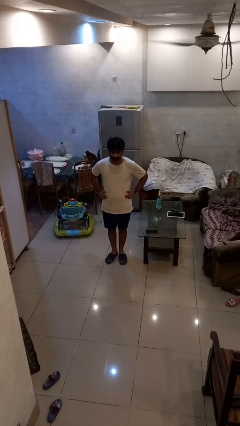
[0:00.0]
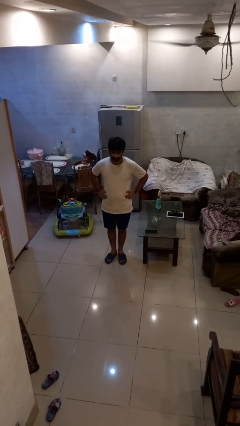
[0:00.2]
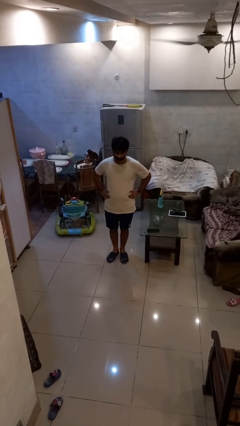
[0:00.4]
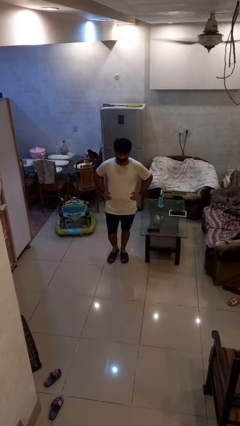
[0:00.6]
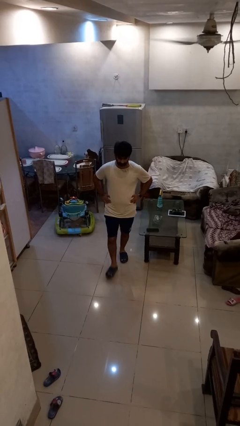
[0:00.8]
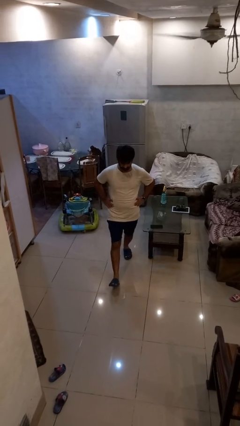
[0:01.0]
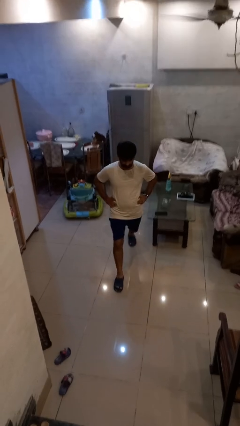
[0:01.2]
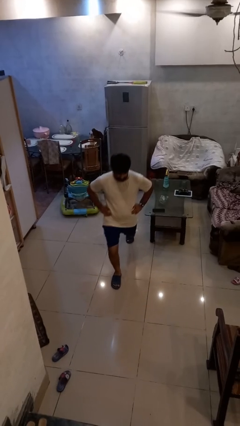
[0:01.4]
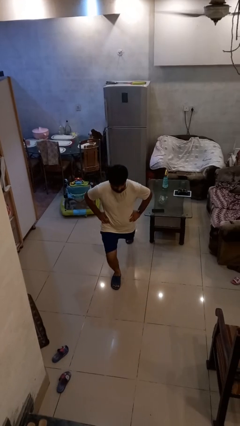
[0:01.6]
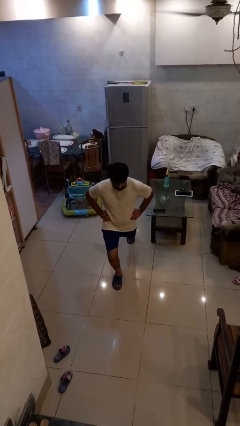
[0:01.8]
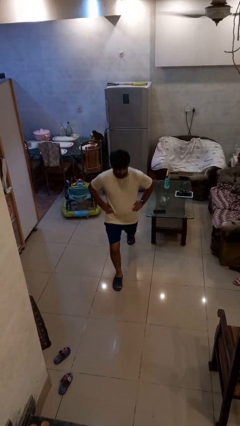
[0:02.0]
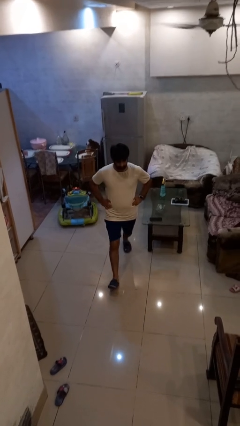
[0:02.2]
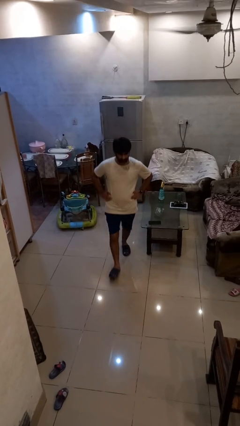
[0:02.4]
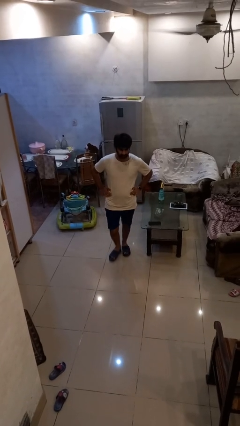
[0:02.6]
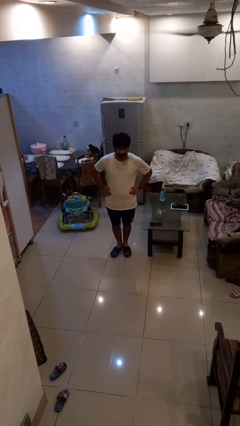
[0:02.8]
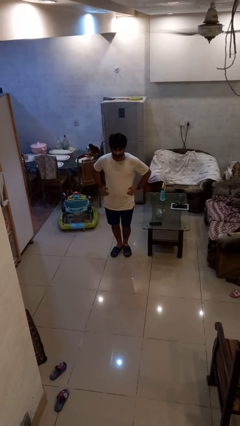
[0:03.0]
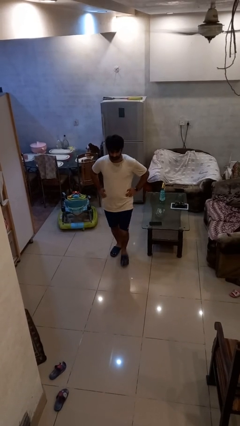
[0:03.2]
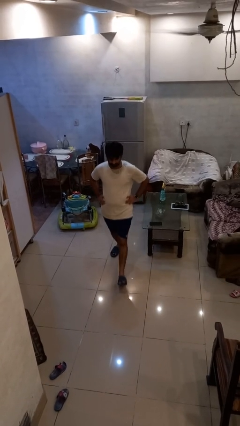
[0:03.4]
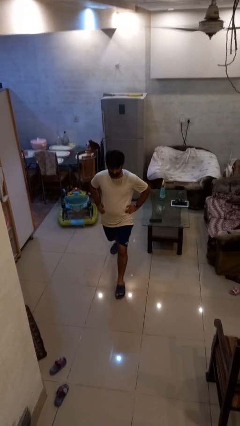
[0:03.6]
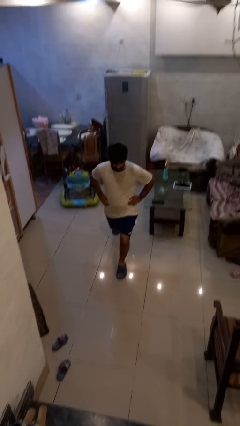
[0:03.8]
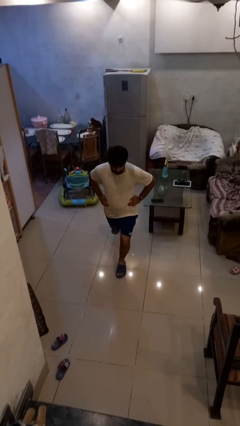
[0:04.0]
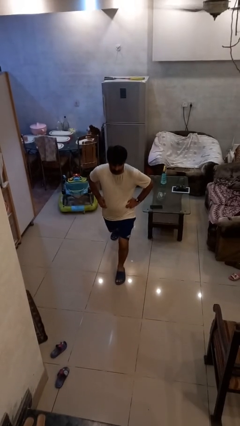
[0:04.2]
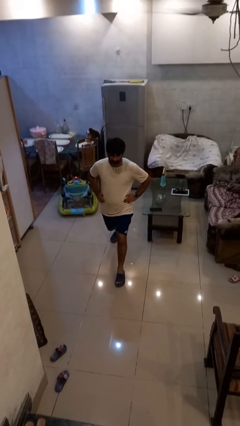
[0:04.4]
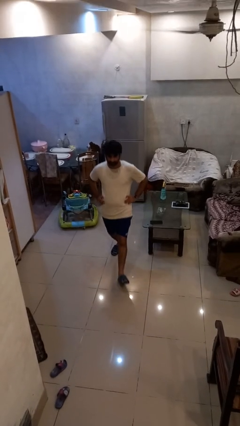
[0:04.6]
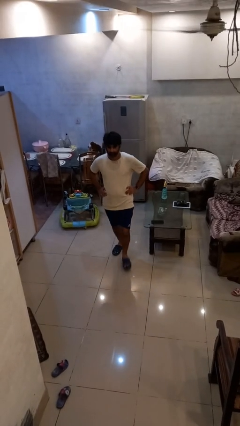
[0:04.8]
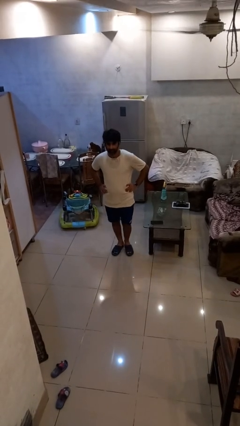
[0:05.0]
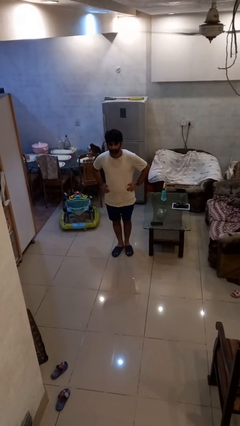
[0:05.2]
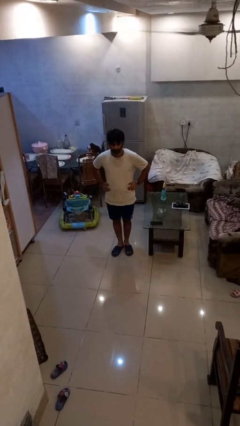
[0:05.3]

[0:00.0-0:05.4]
person exercises with lunges

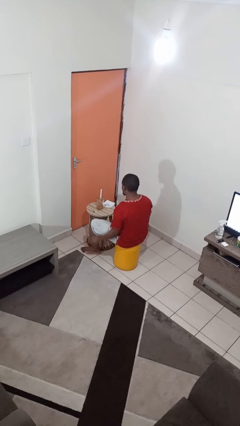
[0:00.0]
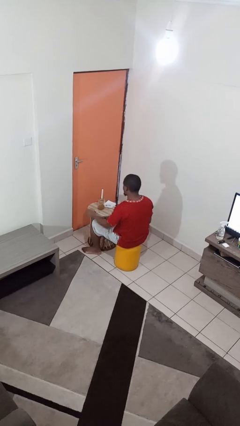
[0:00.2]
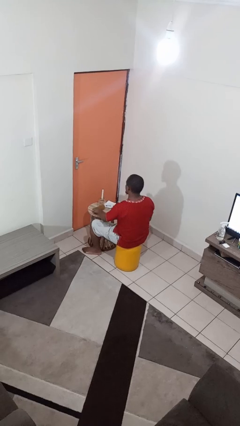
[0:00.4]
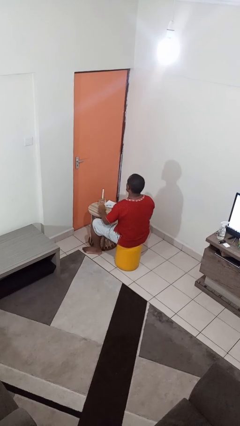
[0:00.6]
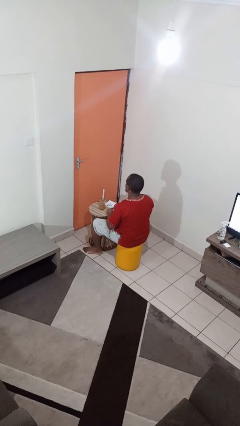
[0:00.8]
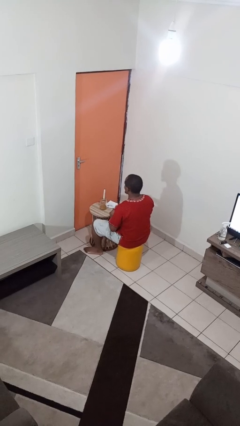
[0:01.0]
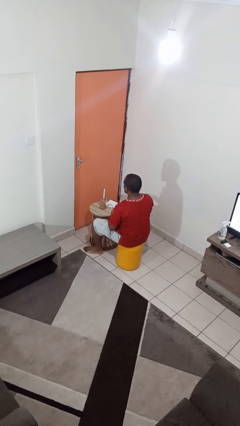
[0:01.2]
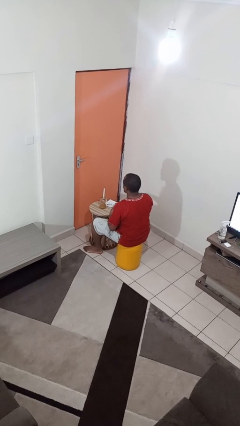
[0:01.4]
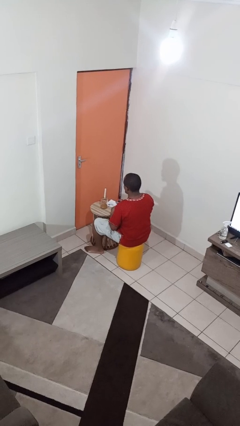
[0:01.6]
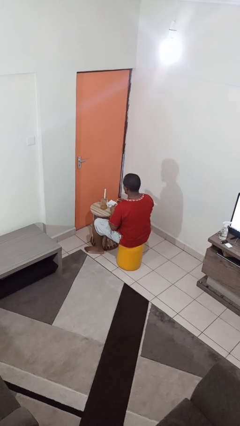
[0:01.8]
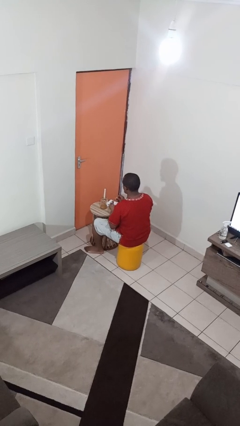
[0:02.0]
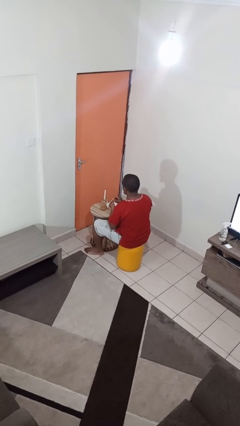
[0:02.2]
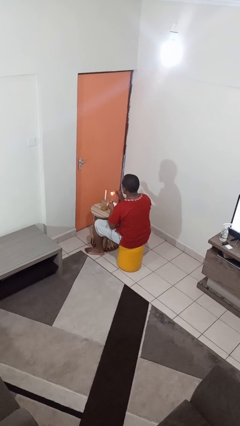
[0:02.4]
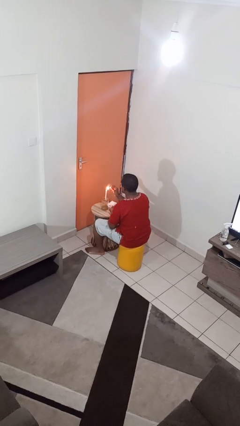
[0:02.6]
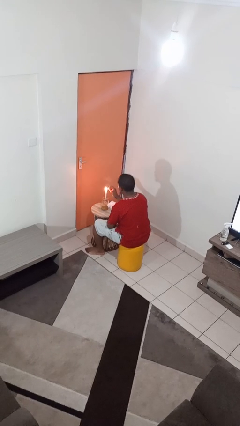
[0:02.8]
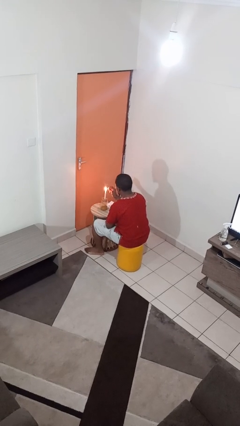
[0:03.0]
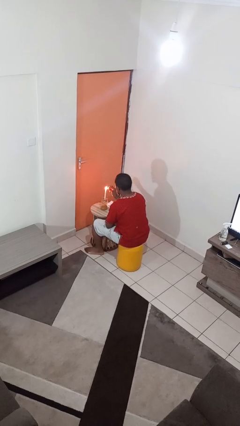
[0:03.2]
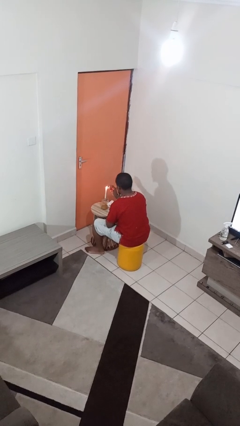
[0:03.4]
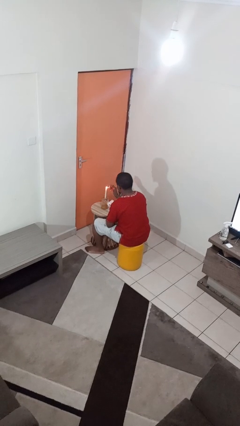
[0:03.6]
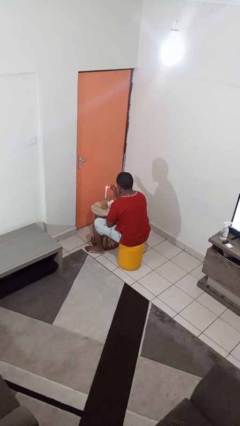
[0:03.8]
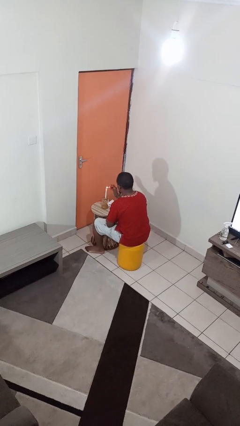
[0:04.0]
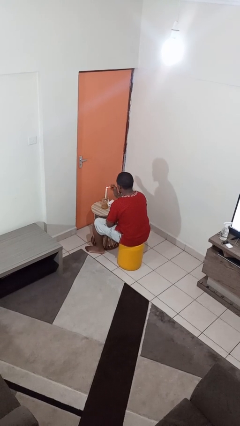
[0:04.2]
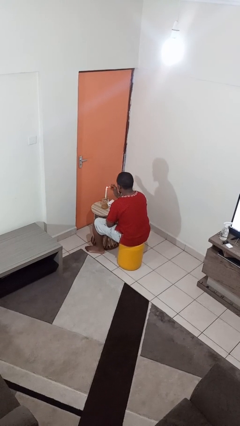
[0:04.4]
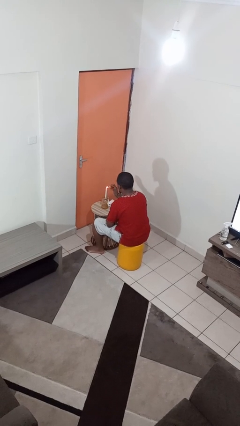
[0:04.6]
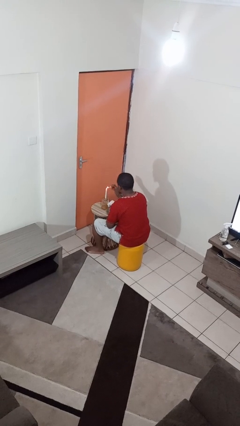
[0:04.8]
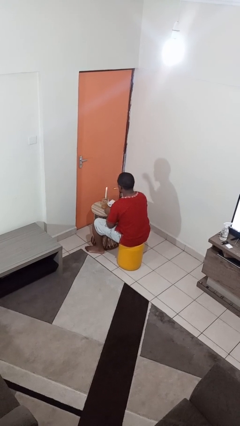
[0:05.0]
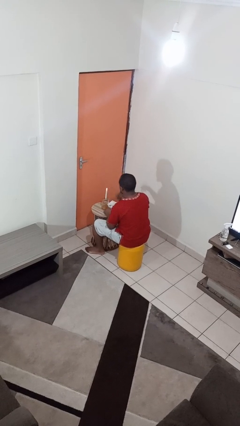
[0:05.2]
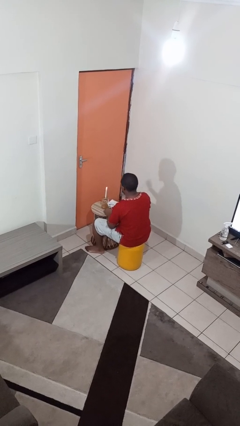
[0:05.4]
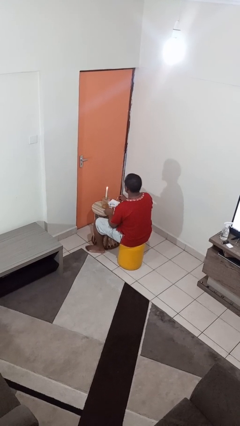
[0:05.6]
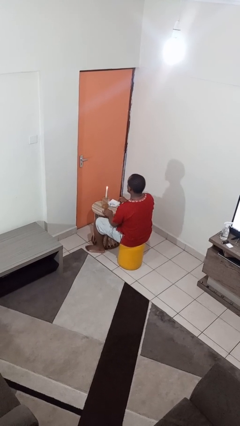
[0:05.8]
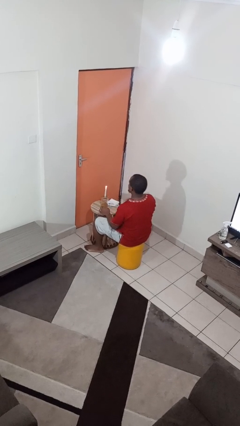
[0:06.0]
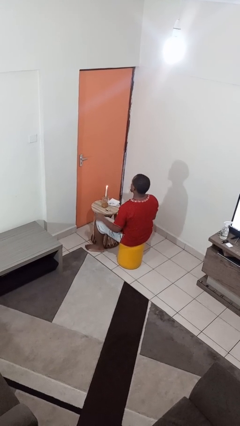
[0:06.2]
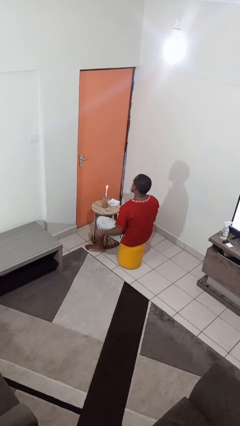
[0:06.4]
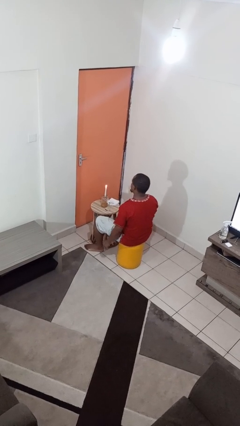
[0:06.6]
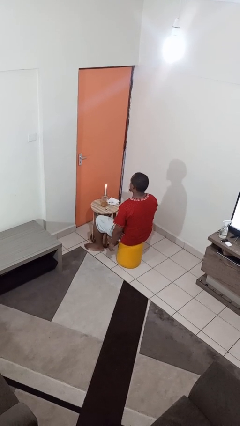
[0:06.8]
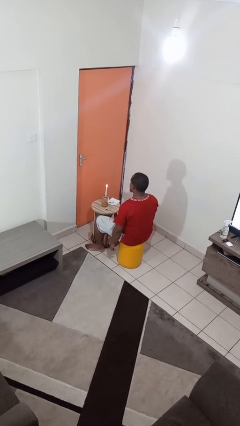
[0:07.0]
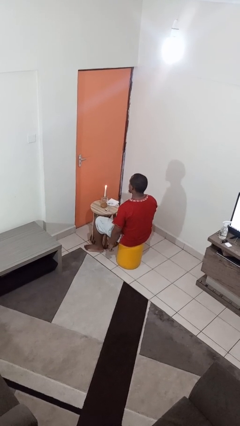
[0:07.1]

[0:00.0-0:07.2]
person lights candle

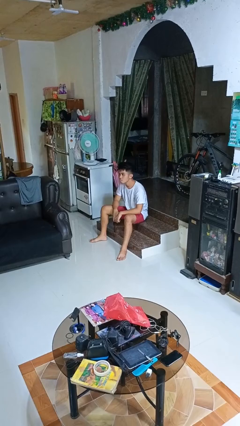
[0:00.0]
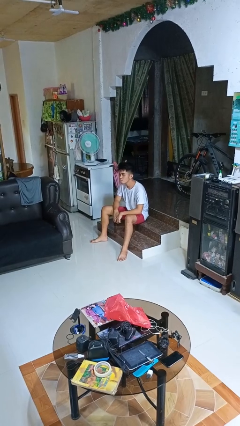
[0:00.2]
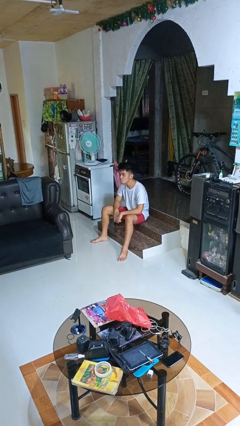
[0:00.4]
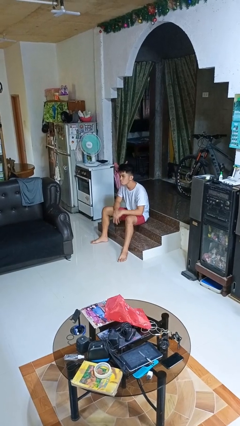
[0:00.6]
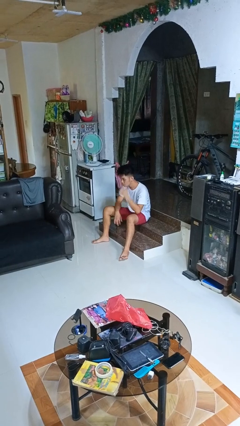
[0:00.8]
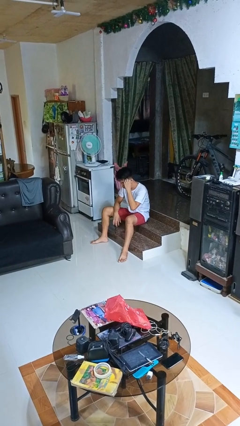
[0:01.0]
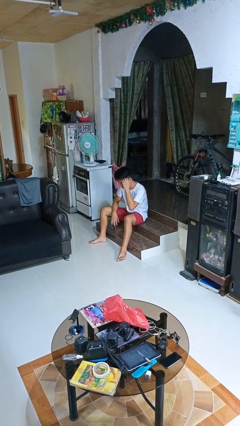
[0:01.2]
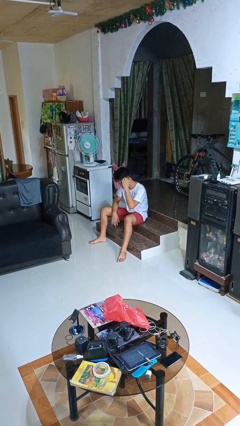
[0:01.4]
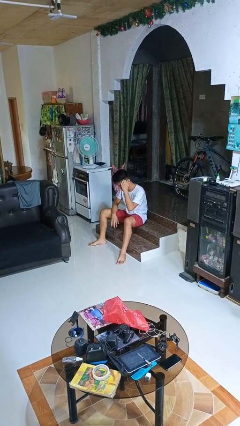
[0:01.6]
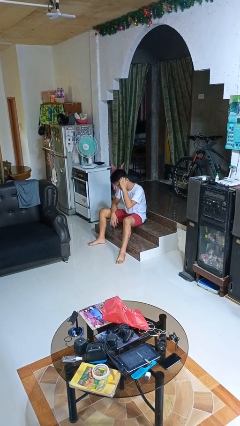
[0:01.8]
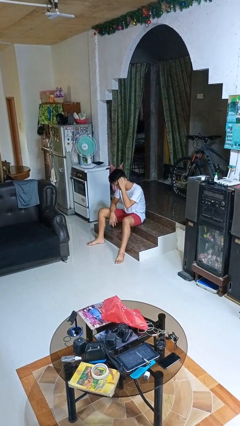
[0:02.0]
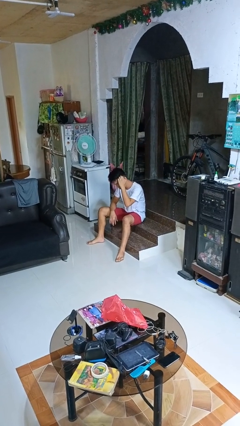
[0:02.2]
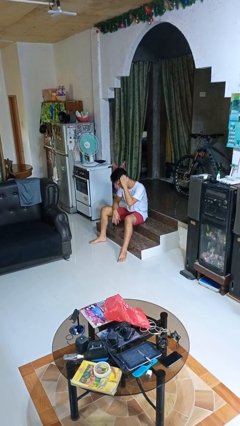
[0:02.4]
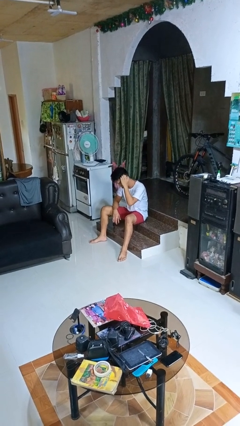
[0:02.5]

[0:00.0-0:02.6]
person scratches face

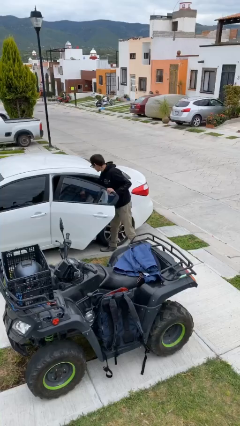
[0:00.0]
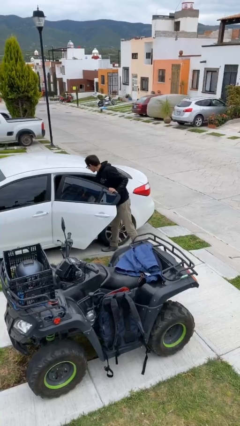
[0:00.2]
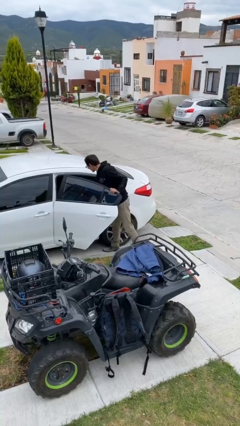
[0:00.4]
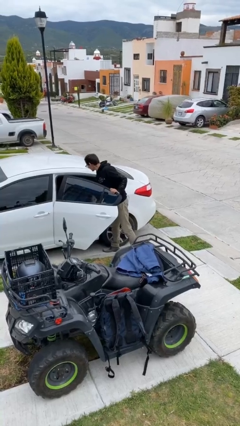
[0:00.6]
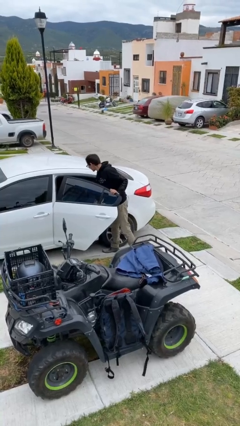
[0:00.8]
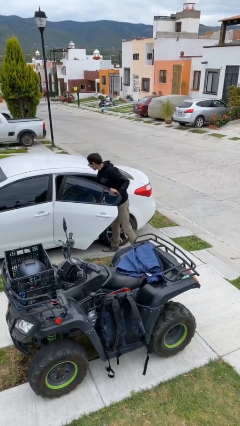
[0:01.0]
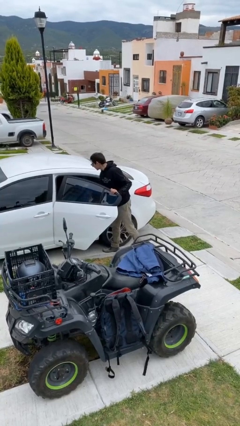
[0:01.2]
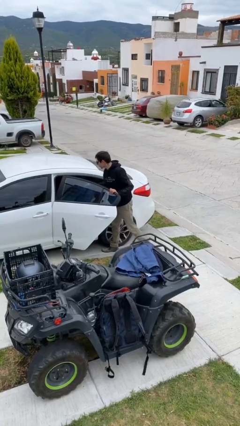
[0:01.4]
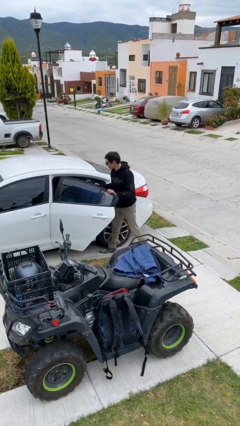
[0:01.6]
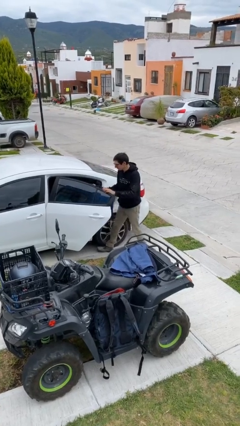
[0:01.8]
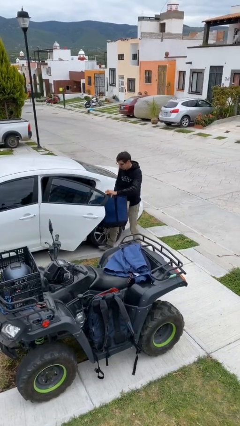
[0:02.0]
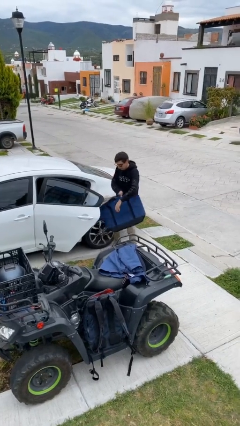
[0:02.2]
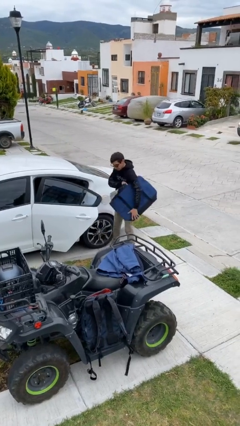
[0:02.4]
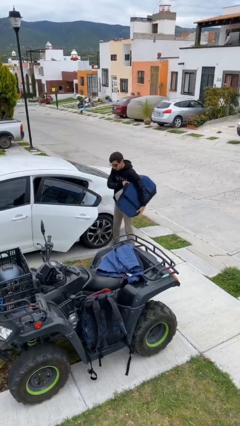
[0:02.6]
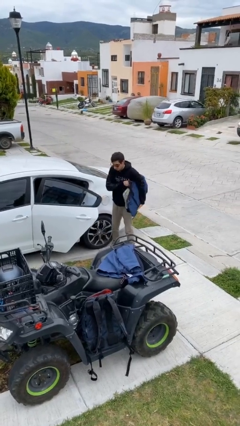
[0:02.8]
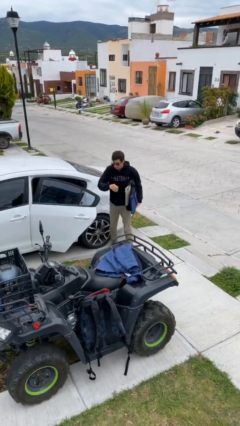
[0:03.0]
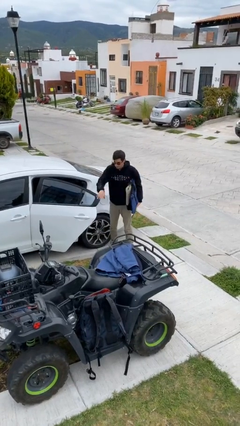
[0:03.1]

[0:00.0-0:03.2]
person unloads car
